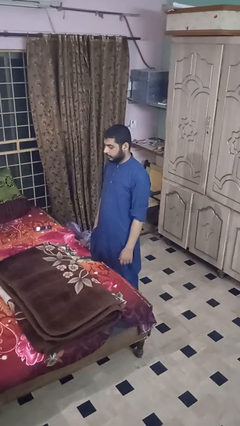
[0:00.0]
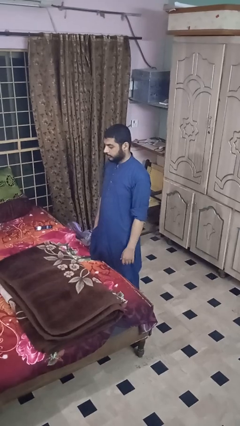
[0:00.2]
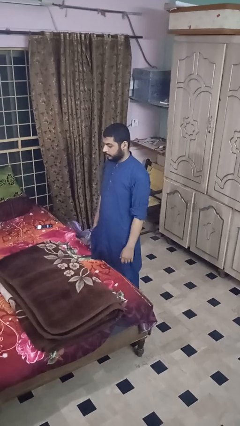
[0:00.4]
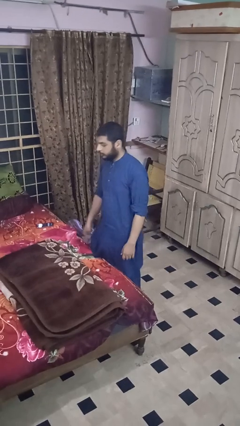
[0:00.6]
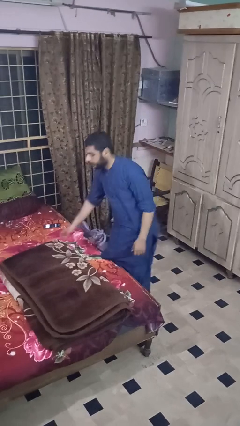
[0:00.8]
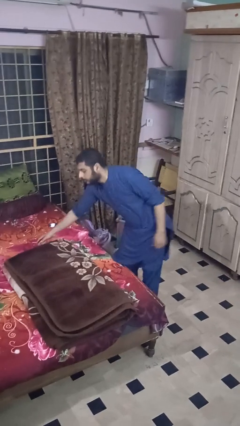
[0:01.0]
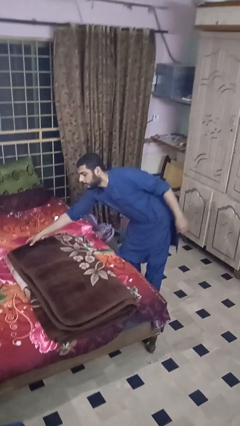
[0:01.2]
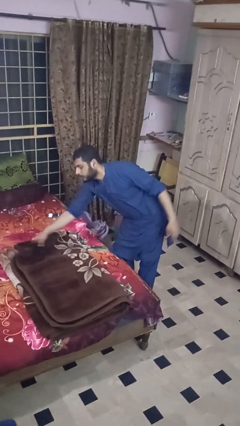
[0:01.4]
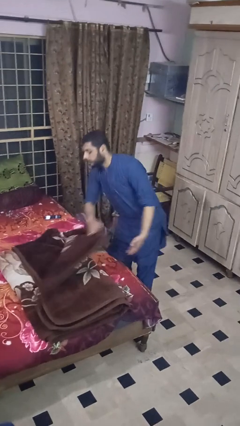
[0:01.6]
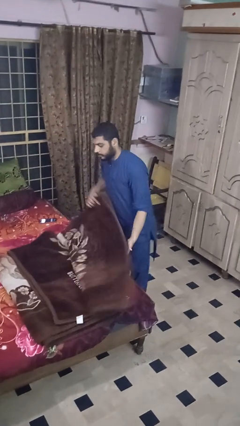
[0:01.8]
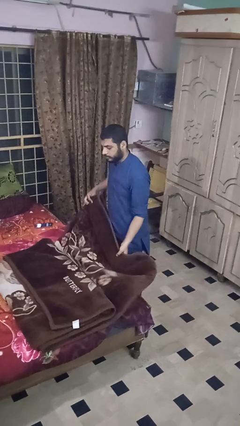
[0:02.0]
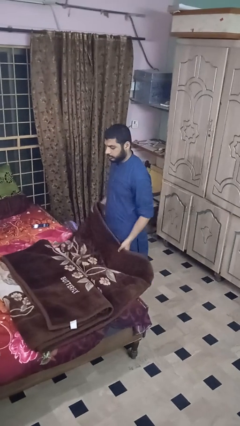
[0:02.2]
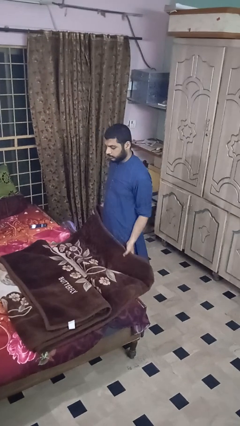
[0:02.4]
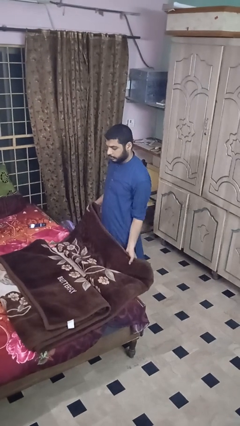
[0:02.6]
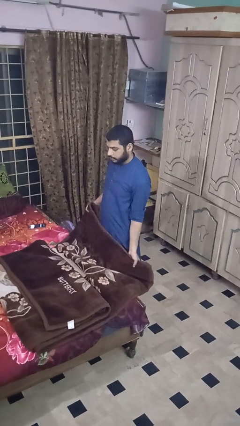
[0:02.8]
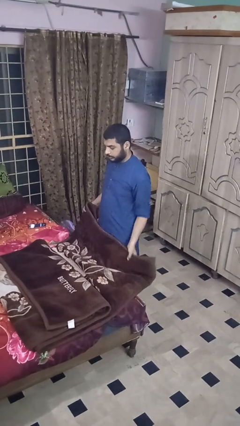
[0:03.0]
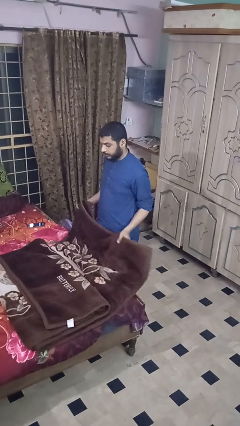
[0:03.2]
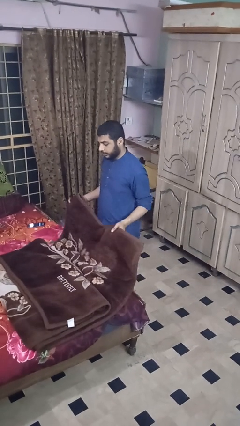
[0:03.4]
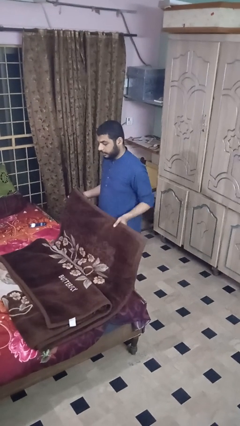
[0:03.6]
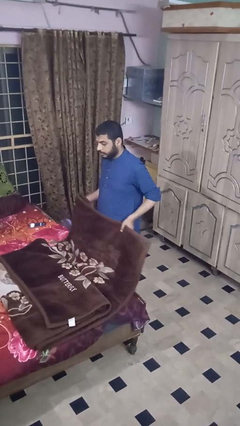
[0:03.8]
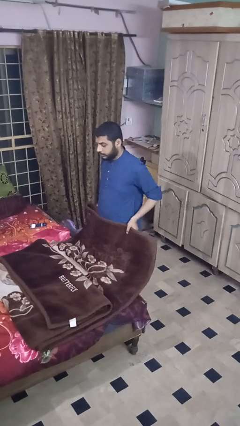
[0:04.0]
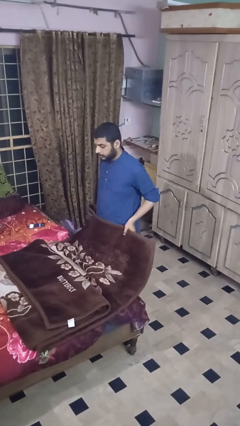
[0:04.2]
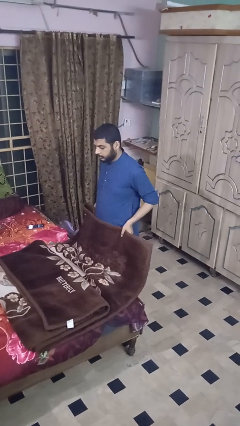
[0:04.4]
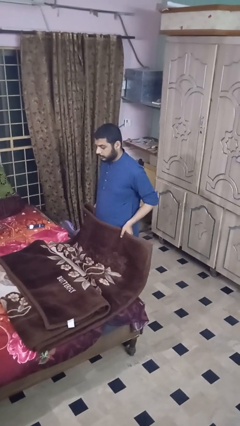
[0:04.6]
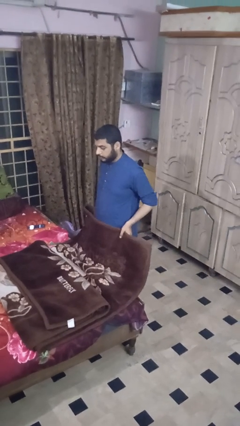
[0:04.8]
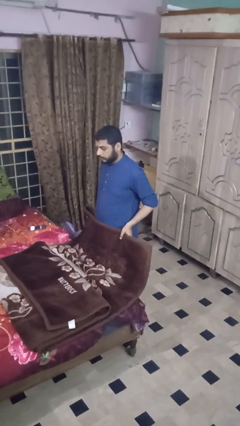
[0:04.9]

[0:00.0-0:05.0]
person unfolds blanket

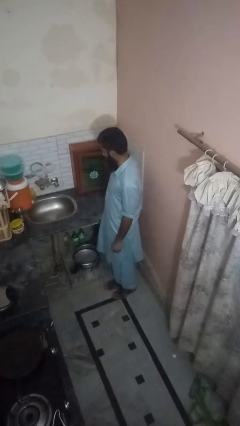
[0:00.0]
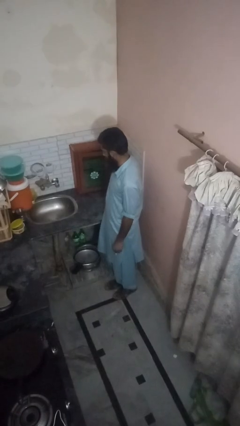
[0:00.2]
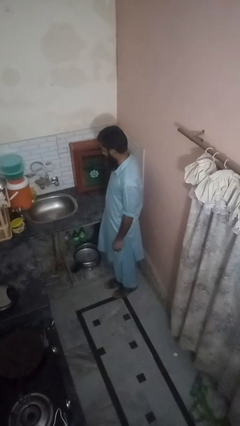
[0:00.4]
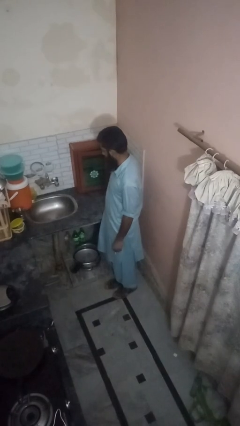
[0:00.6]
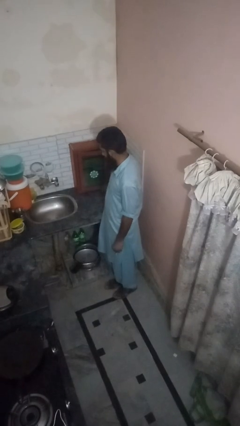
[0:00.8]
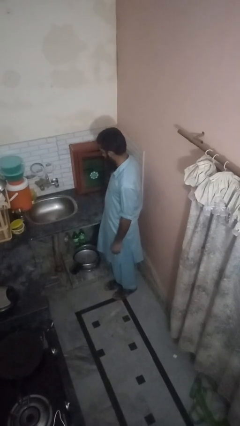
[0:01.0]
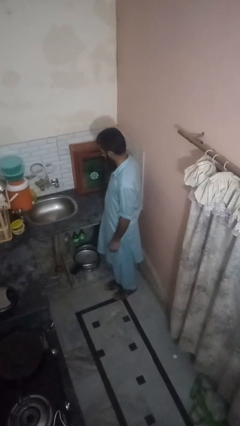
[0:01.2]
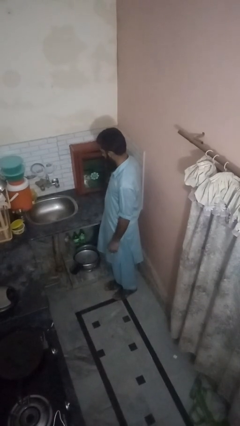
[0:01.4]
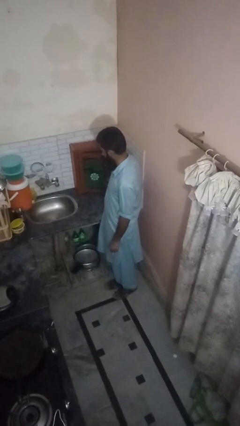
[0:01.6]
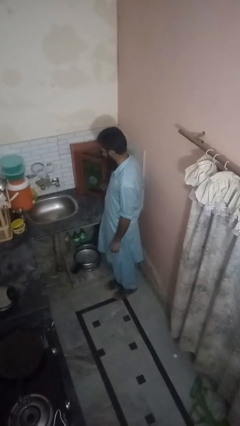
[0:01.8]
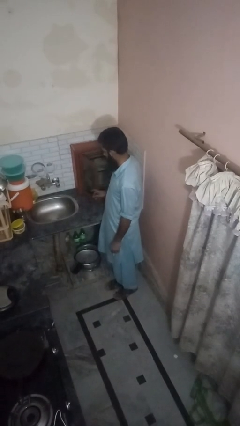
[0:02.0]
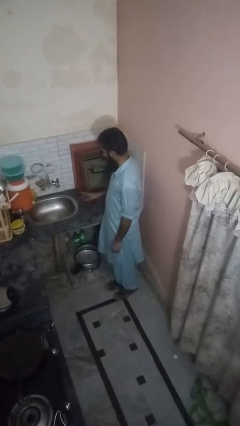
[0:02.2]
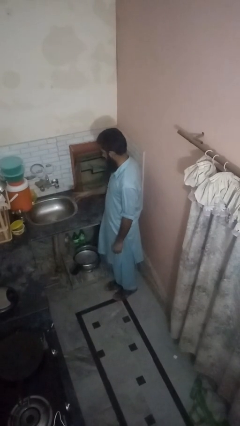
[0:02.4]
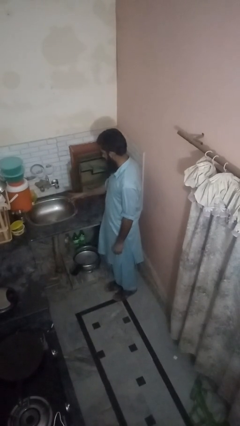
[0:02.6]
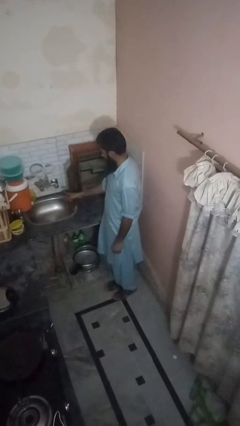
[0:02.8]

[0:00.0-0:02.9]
person opens kitchen drawer

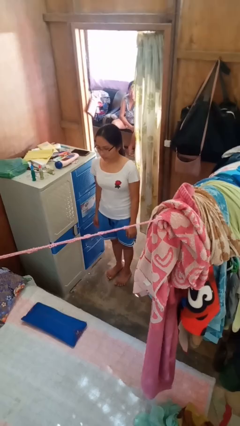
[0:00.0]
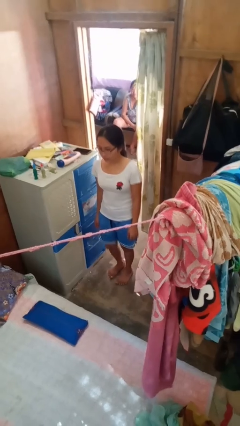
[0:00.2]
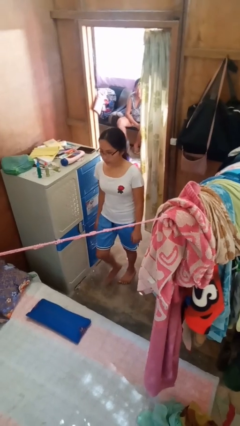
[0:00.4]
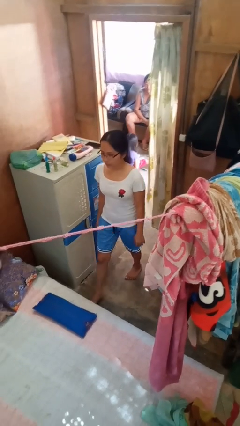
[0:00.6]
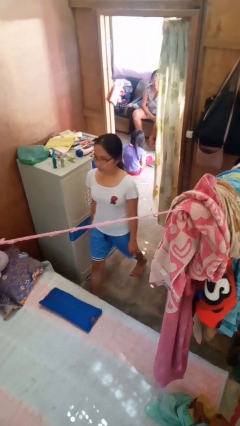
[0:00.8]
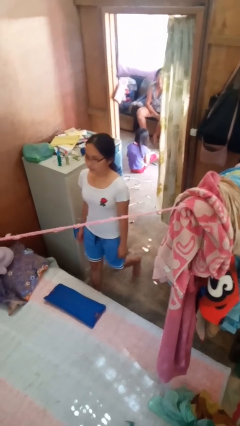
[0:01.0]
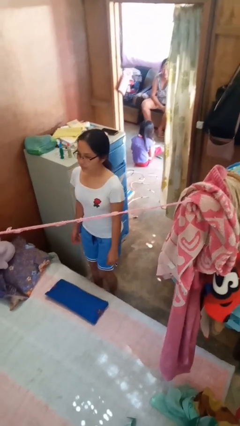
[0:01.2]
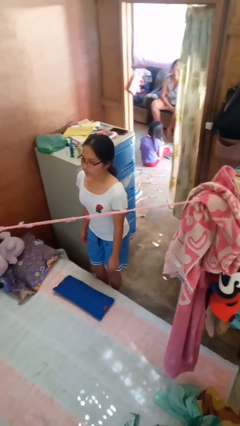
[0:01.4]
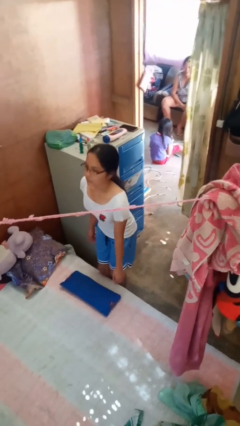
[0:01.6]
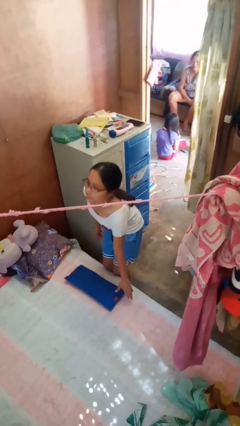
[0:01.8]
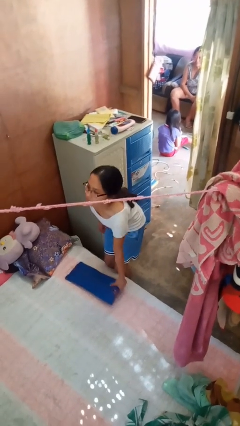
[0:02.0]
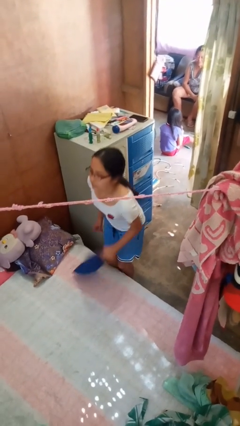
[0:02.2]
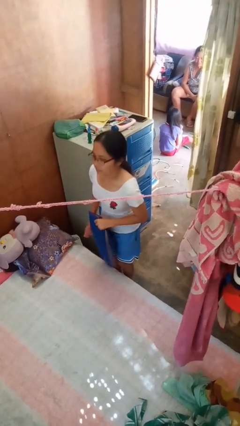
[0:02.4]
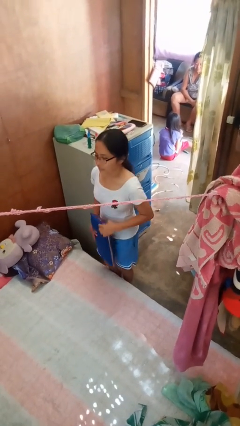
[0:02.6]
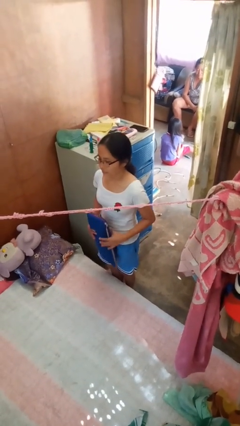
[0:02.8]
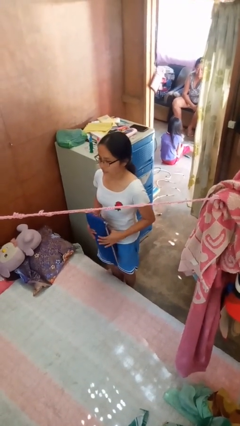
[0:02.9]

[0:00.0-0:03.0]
person picks up object from bed

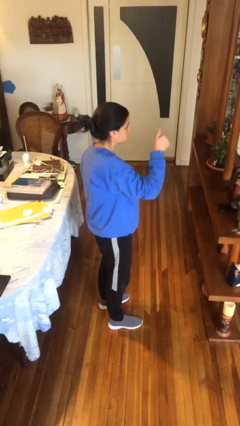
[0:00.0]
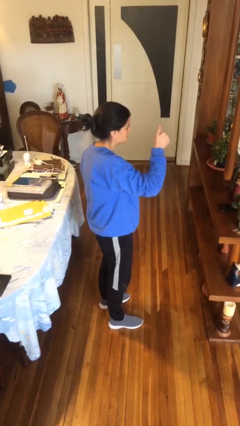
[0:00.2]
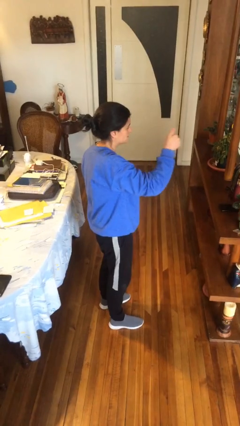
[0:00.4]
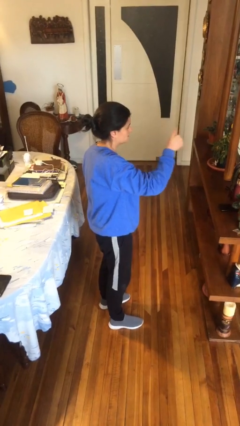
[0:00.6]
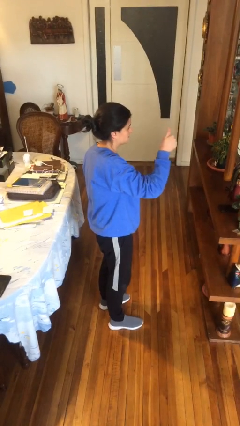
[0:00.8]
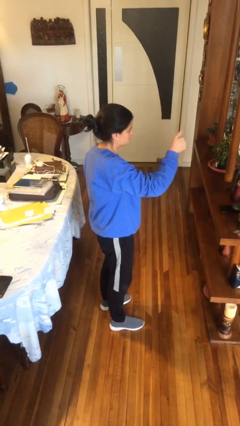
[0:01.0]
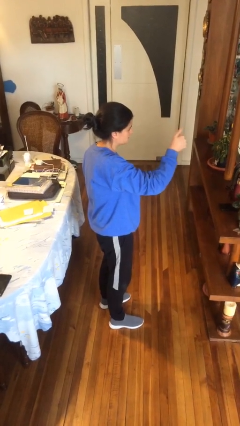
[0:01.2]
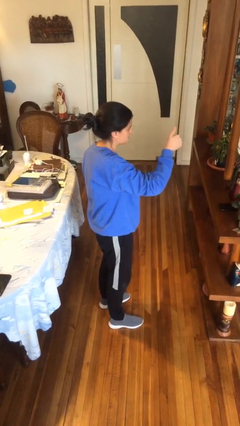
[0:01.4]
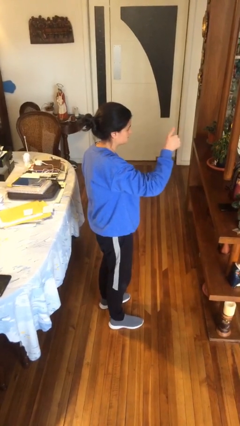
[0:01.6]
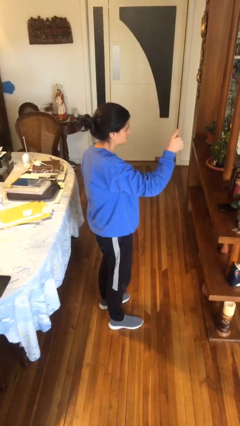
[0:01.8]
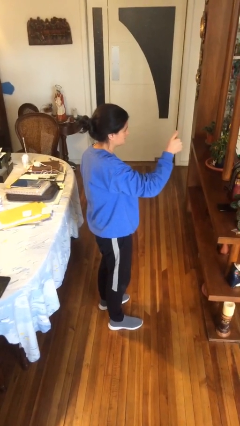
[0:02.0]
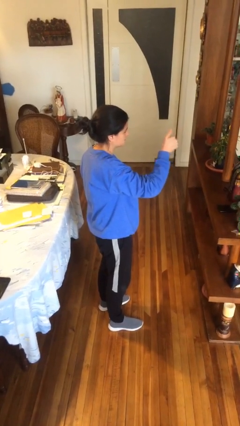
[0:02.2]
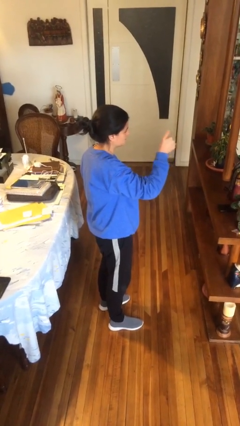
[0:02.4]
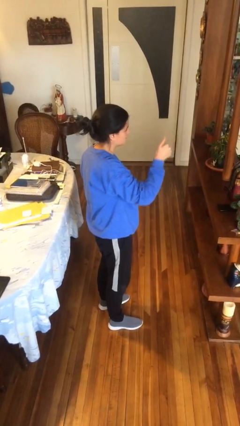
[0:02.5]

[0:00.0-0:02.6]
person gestures thumbs up

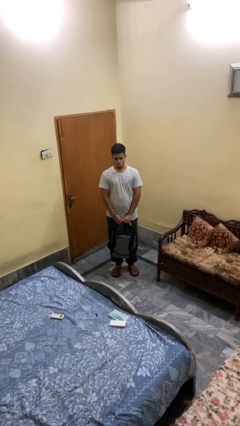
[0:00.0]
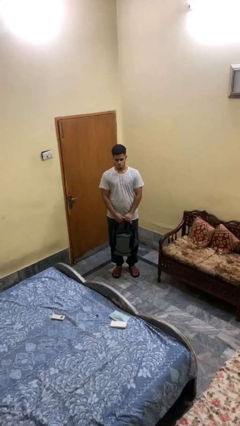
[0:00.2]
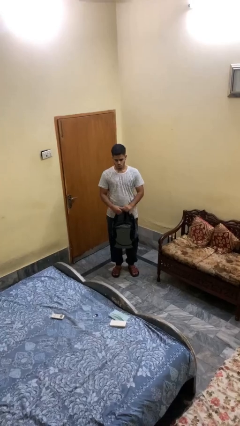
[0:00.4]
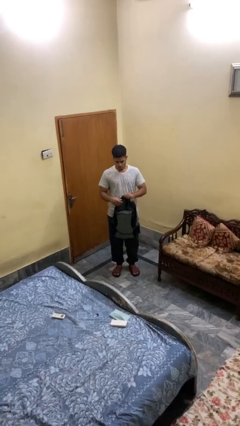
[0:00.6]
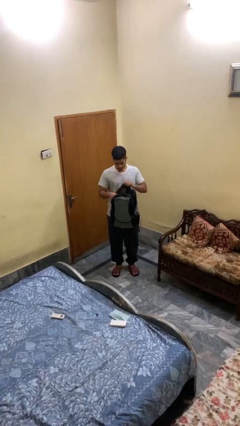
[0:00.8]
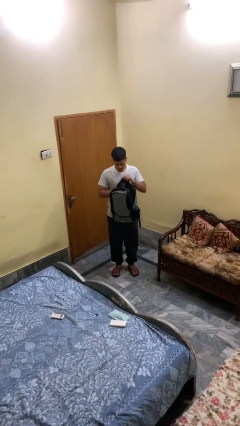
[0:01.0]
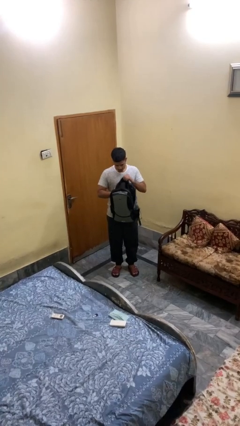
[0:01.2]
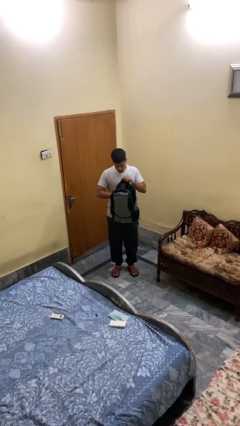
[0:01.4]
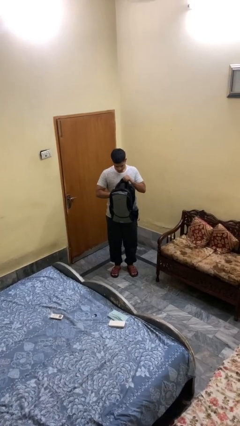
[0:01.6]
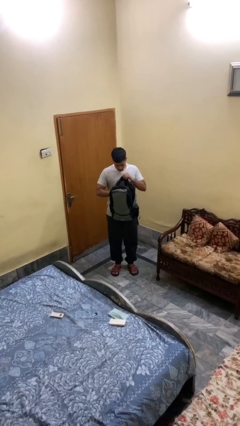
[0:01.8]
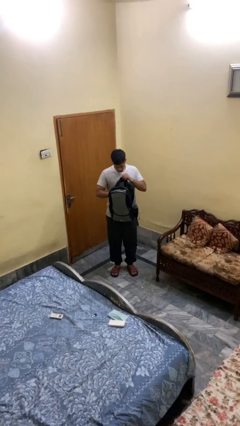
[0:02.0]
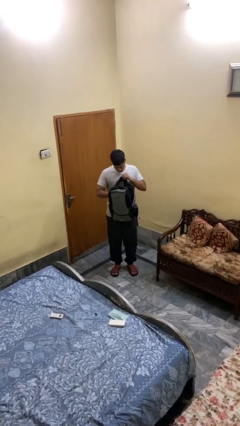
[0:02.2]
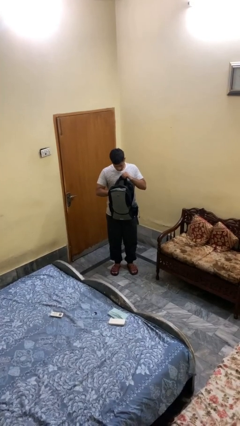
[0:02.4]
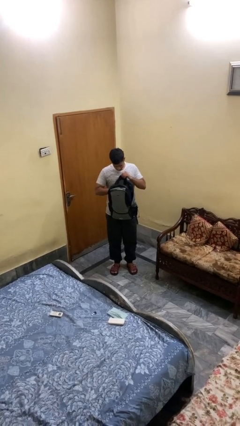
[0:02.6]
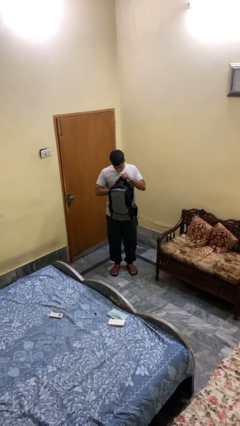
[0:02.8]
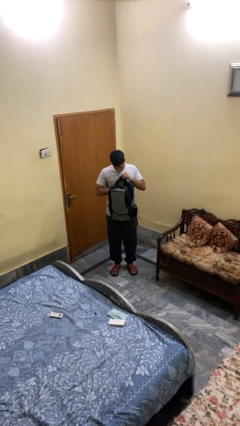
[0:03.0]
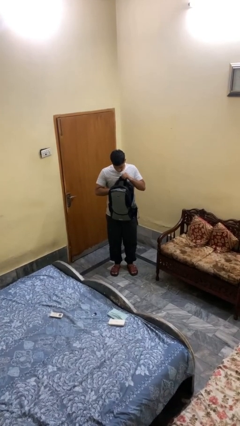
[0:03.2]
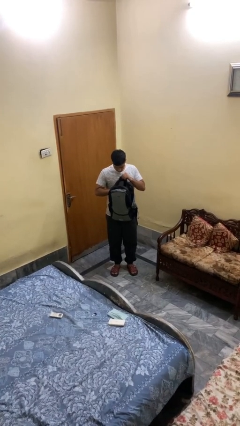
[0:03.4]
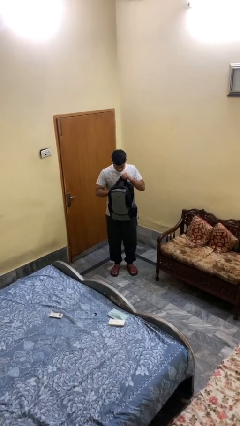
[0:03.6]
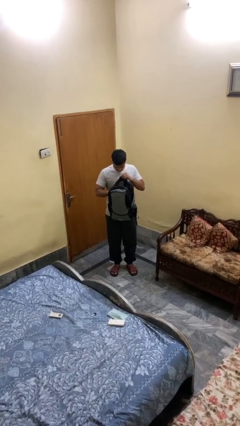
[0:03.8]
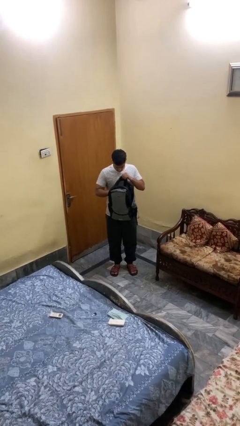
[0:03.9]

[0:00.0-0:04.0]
person searches in backpack
